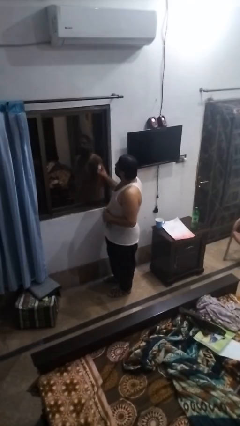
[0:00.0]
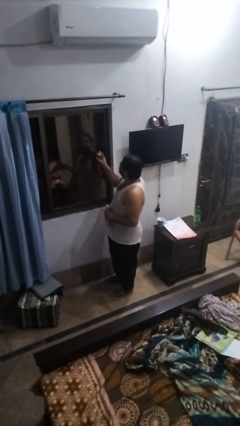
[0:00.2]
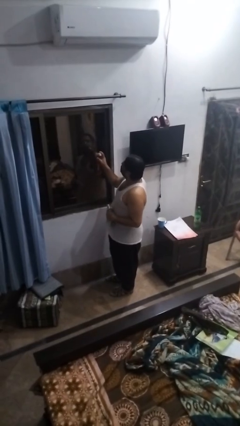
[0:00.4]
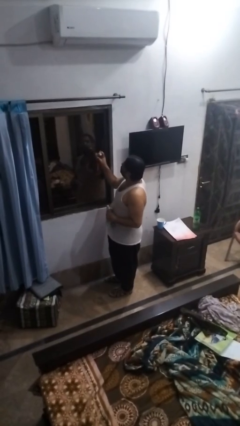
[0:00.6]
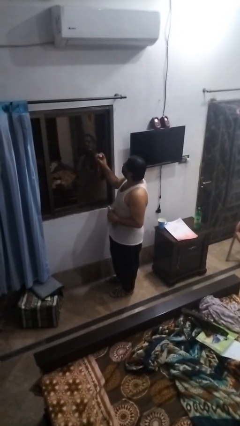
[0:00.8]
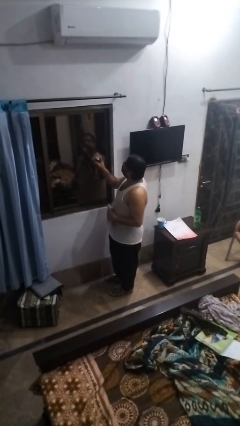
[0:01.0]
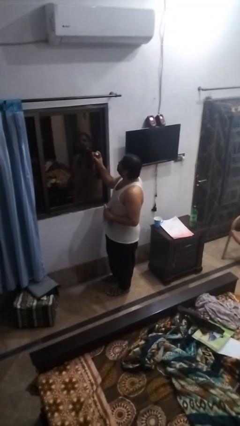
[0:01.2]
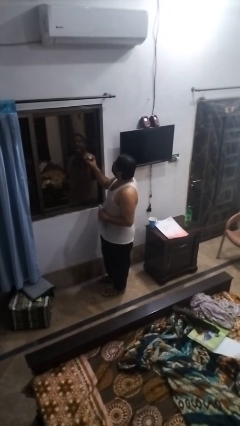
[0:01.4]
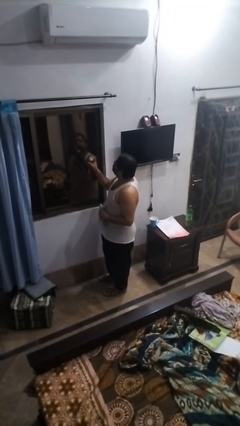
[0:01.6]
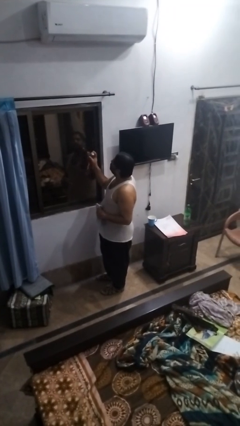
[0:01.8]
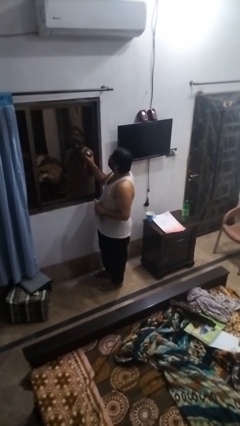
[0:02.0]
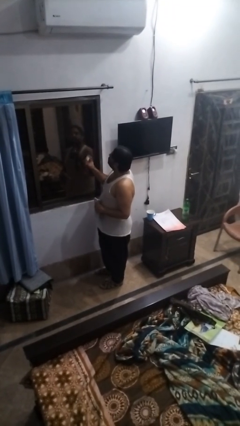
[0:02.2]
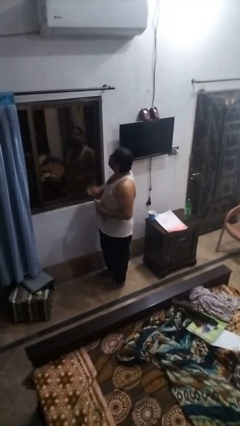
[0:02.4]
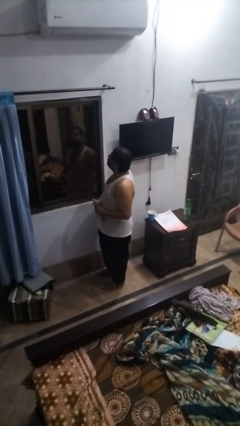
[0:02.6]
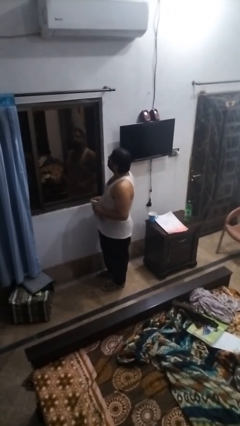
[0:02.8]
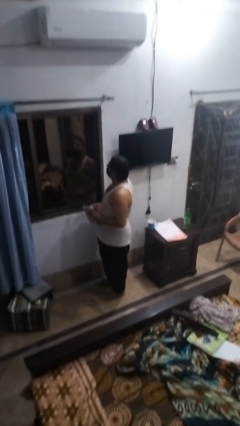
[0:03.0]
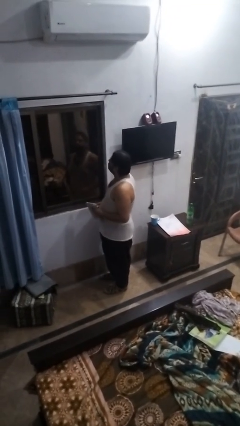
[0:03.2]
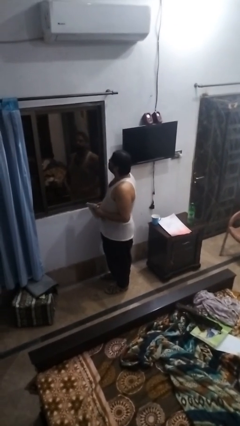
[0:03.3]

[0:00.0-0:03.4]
person sprays from bottle

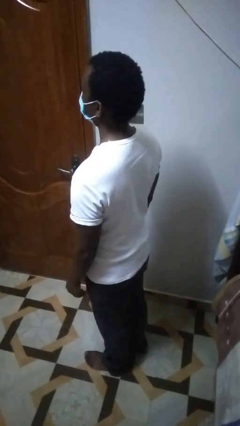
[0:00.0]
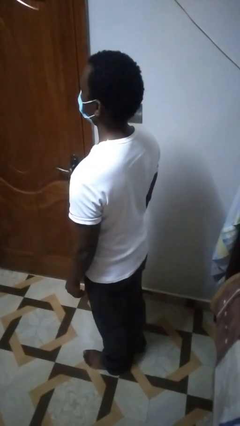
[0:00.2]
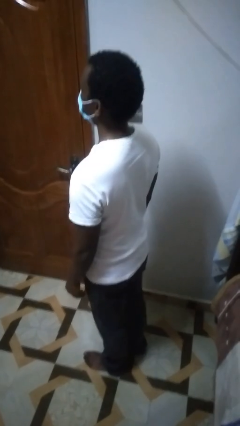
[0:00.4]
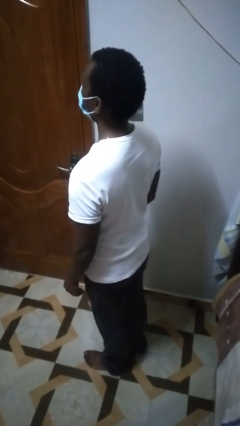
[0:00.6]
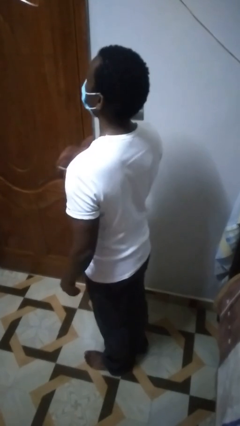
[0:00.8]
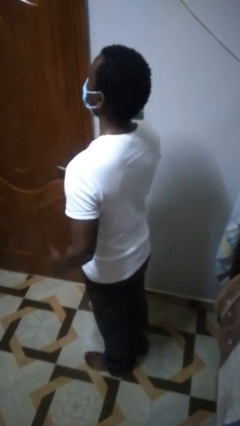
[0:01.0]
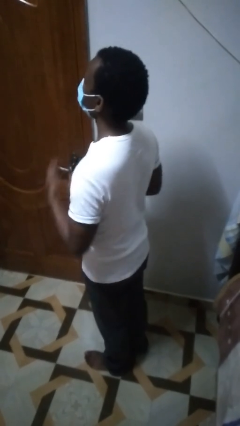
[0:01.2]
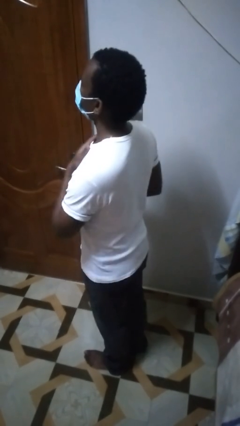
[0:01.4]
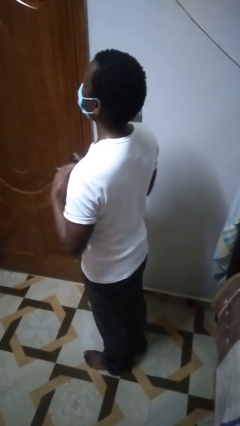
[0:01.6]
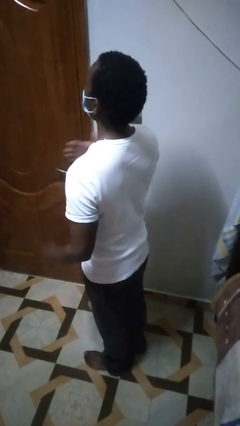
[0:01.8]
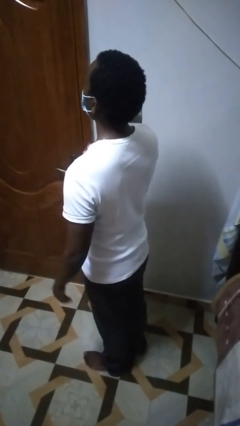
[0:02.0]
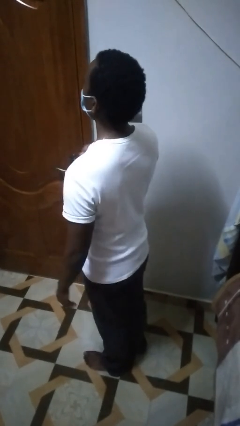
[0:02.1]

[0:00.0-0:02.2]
person drums on chest

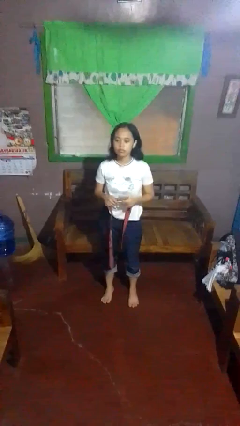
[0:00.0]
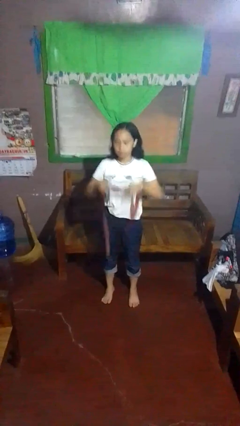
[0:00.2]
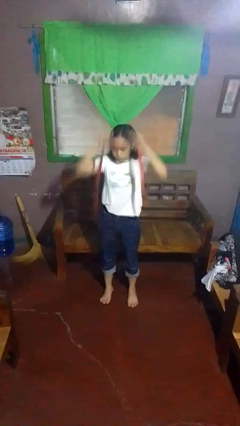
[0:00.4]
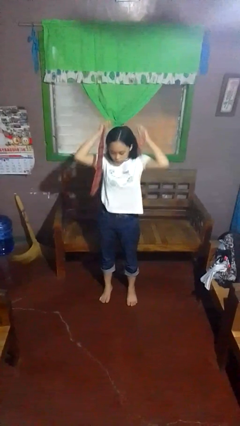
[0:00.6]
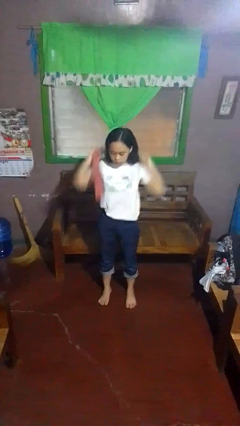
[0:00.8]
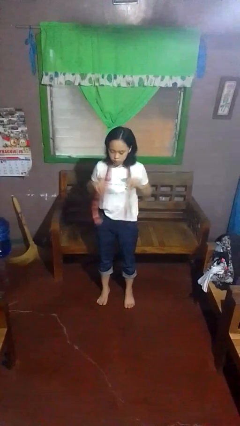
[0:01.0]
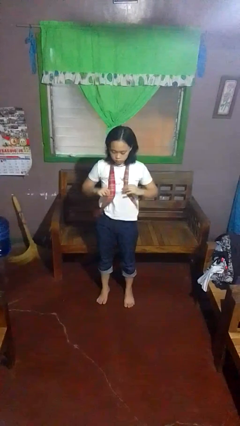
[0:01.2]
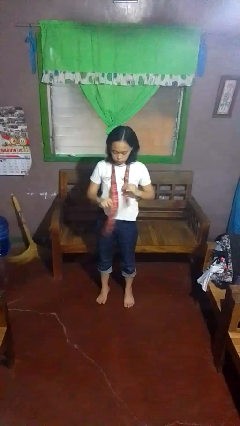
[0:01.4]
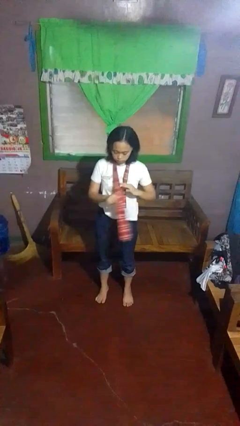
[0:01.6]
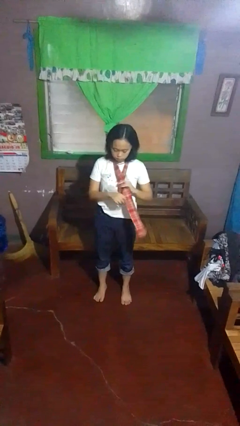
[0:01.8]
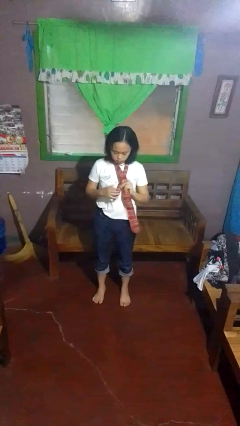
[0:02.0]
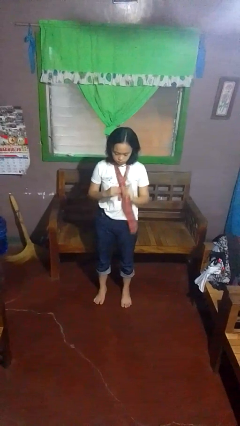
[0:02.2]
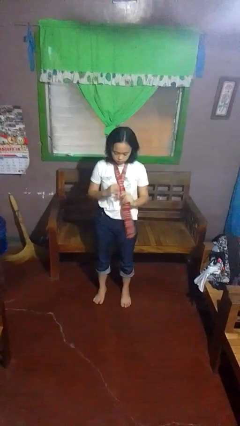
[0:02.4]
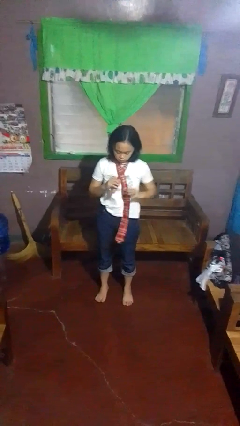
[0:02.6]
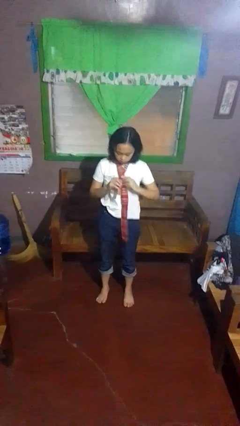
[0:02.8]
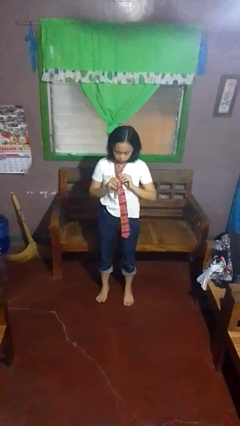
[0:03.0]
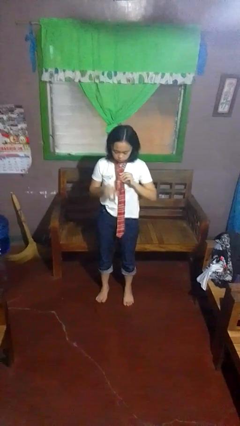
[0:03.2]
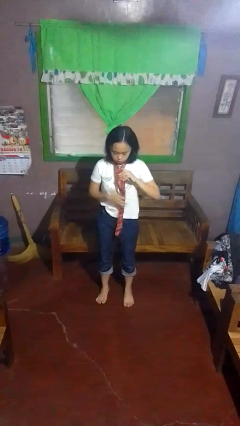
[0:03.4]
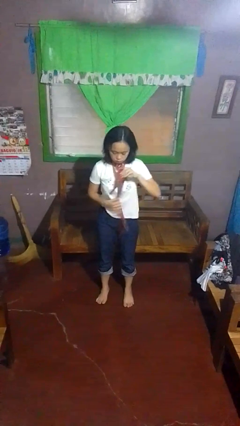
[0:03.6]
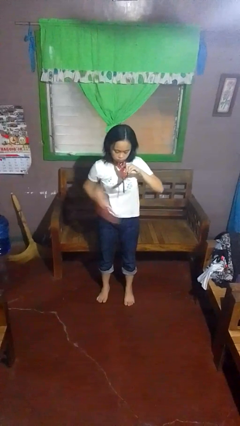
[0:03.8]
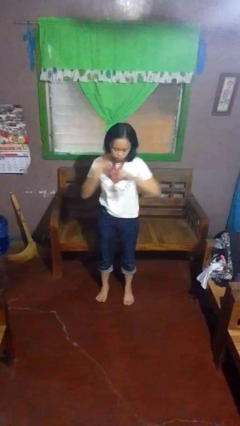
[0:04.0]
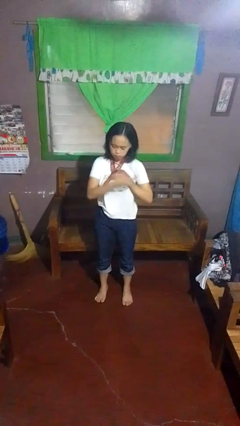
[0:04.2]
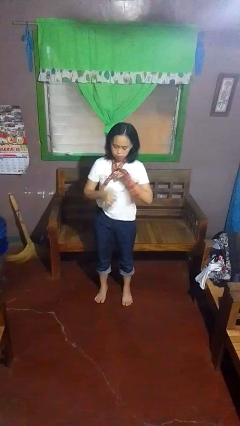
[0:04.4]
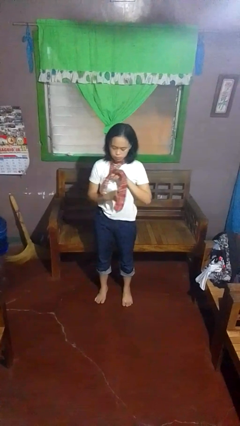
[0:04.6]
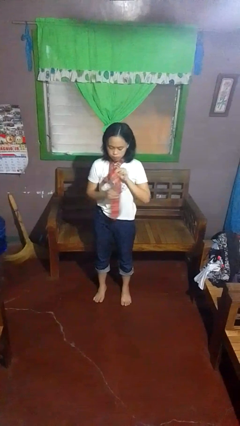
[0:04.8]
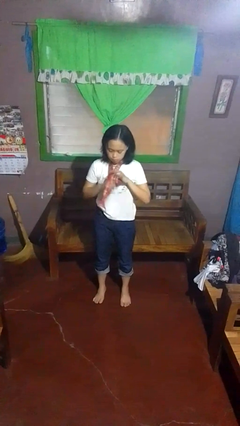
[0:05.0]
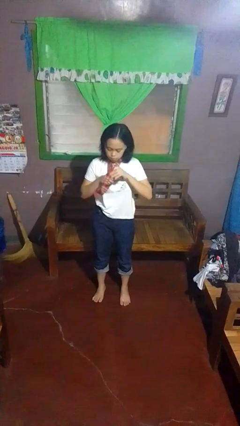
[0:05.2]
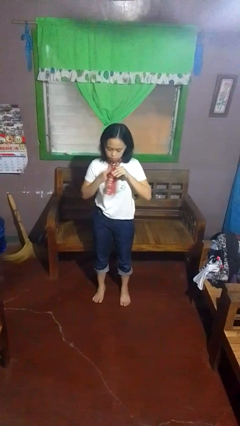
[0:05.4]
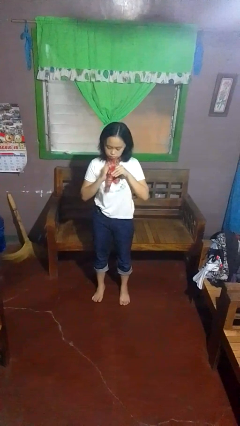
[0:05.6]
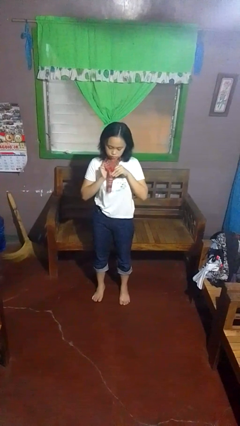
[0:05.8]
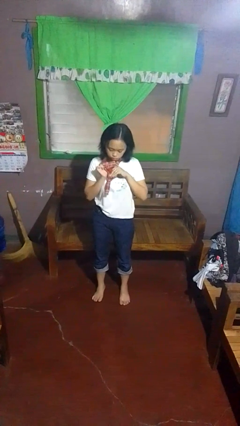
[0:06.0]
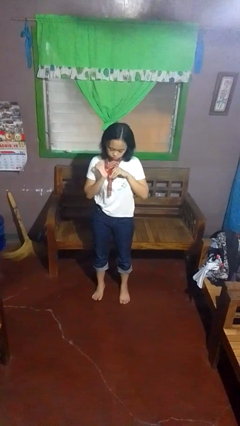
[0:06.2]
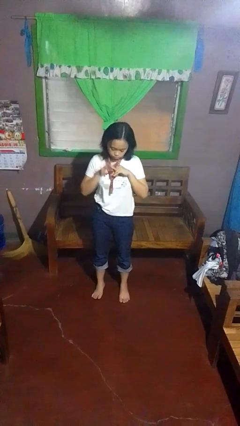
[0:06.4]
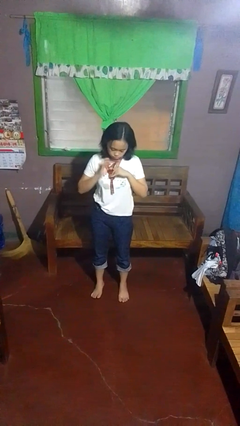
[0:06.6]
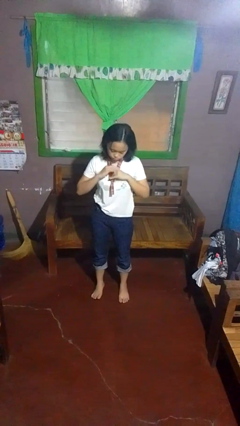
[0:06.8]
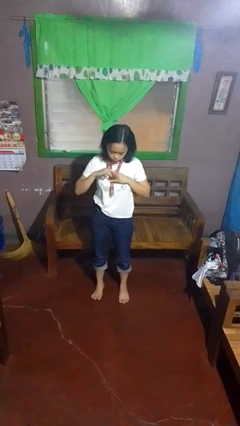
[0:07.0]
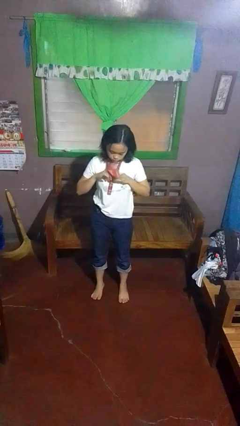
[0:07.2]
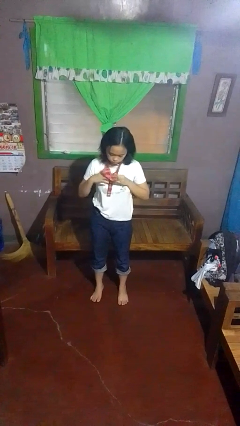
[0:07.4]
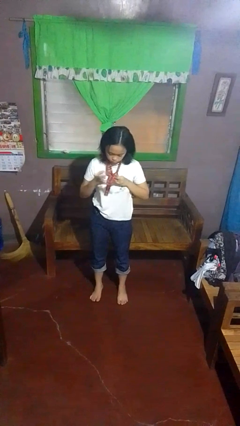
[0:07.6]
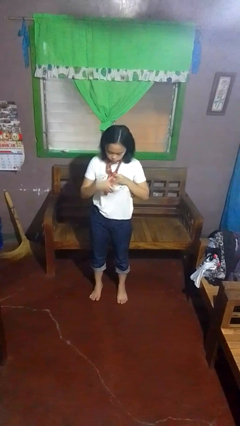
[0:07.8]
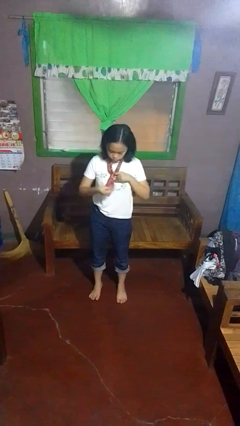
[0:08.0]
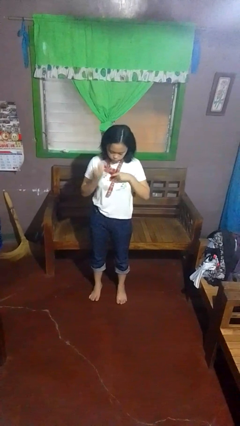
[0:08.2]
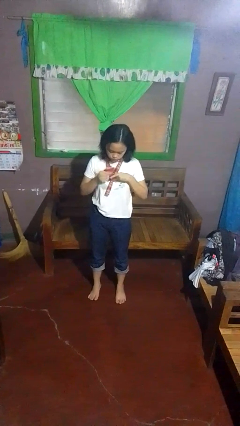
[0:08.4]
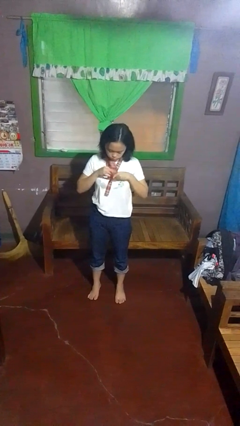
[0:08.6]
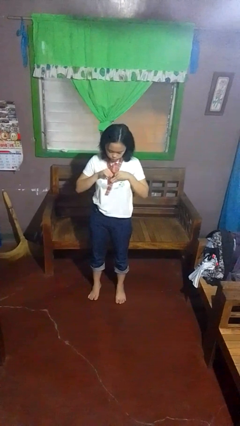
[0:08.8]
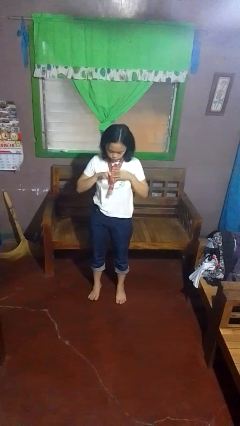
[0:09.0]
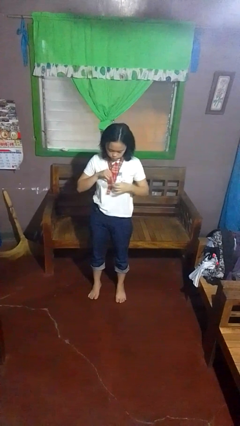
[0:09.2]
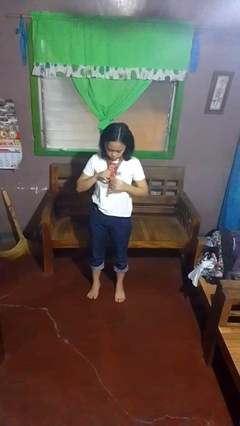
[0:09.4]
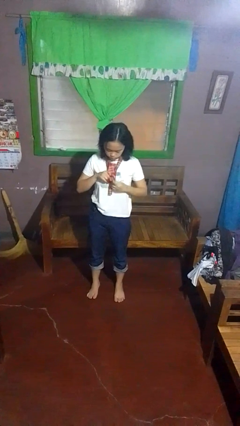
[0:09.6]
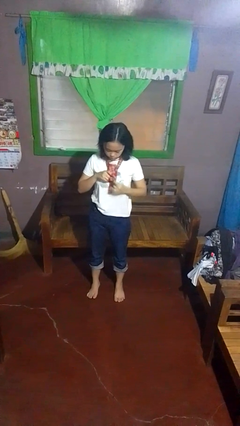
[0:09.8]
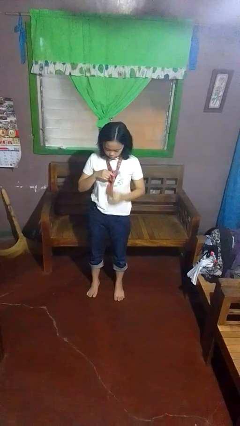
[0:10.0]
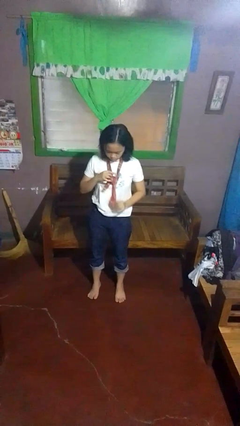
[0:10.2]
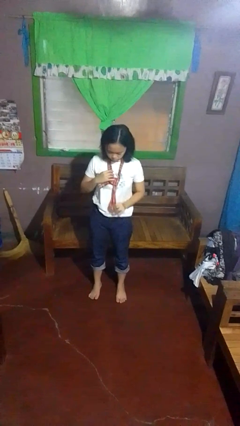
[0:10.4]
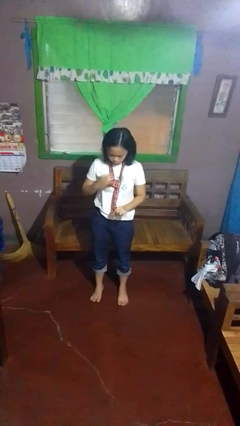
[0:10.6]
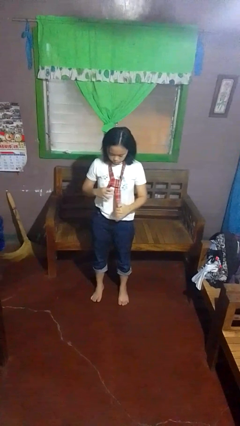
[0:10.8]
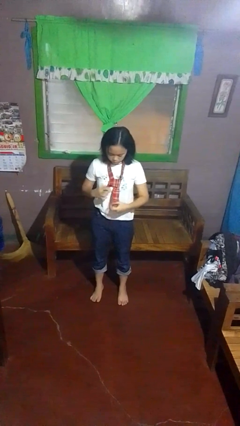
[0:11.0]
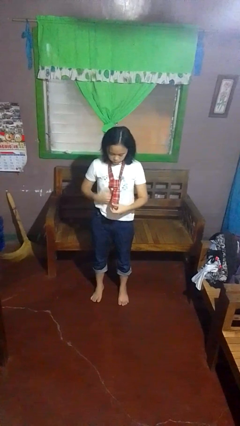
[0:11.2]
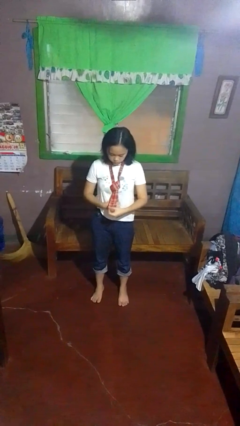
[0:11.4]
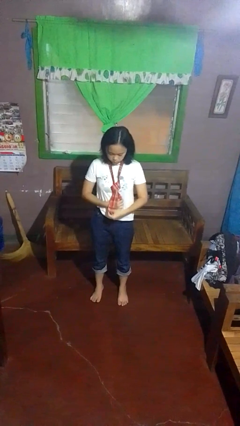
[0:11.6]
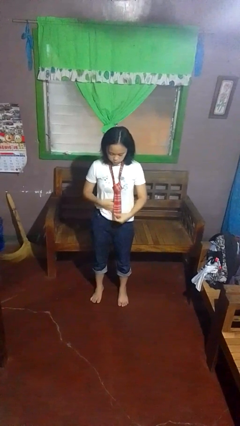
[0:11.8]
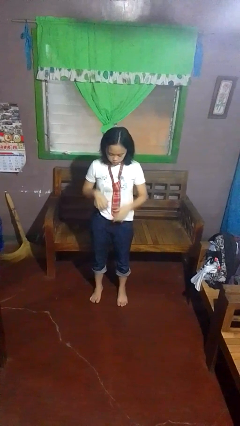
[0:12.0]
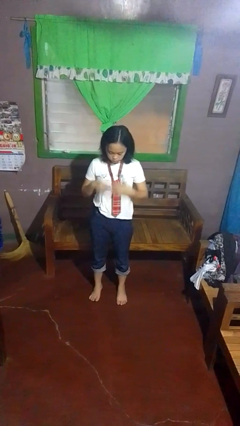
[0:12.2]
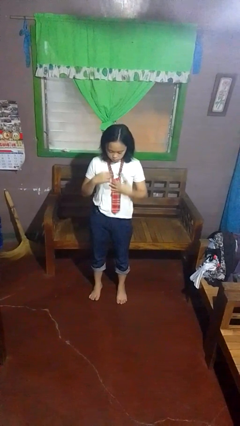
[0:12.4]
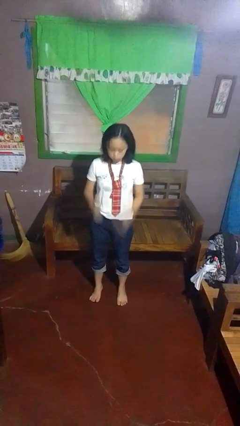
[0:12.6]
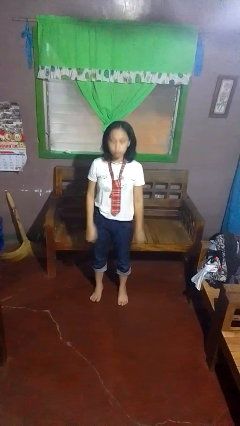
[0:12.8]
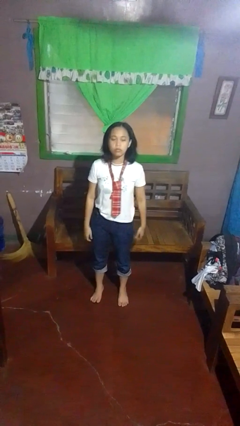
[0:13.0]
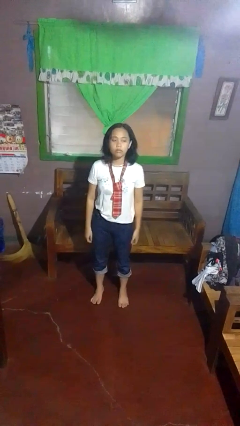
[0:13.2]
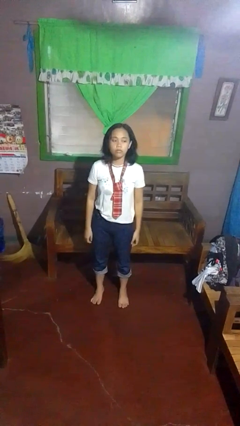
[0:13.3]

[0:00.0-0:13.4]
person puts on necktie
